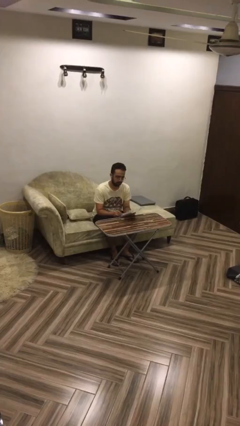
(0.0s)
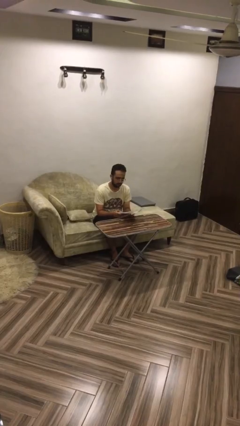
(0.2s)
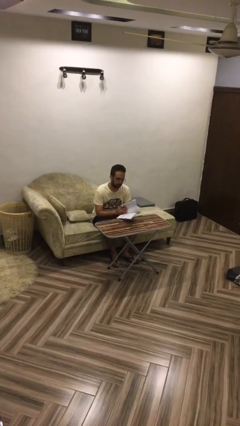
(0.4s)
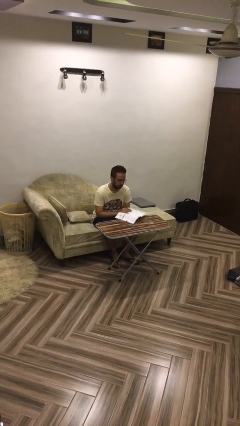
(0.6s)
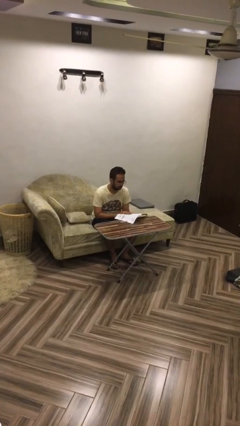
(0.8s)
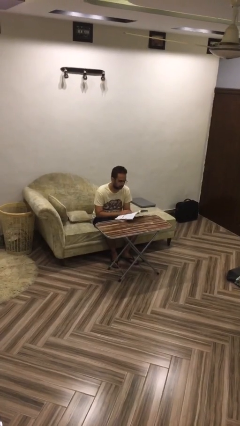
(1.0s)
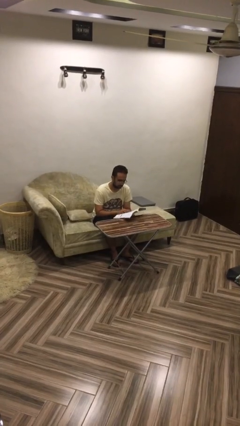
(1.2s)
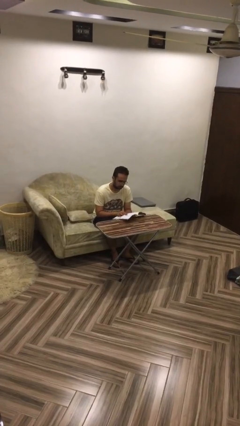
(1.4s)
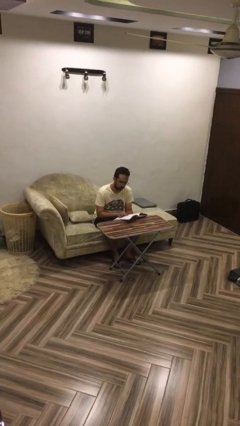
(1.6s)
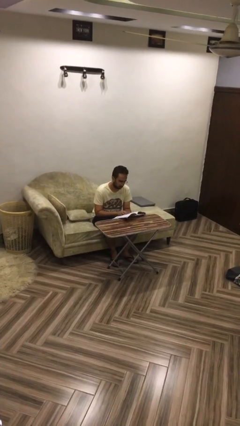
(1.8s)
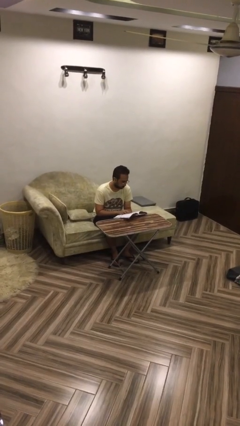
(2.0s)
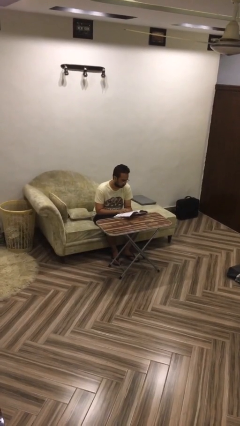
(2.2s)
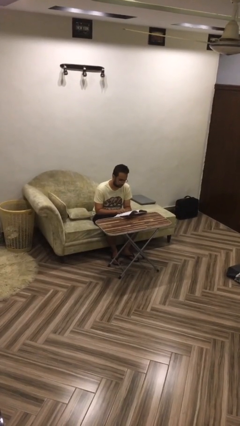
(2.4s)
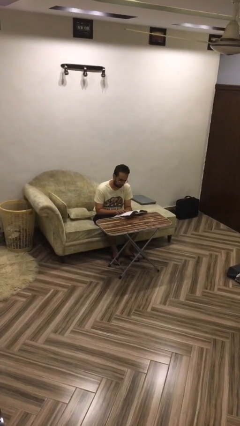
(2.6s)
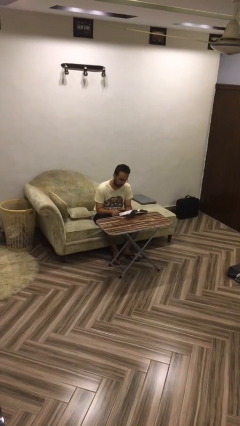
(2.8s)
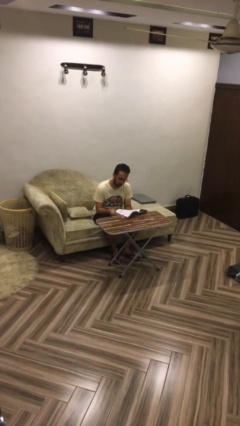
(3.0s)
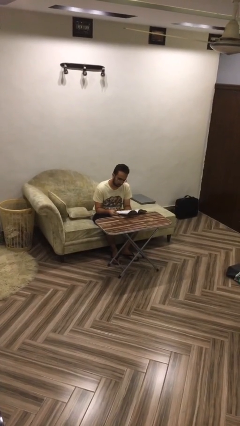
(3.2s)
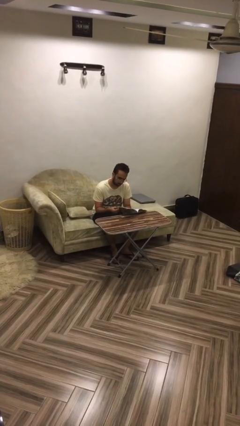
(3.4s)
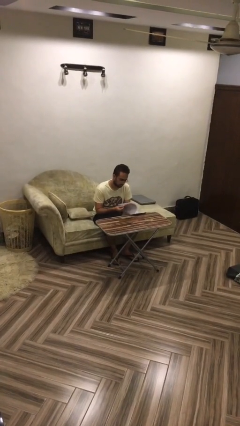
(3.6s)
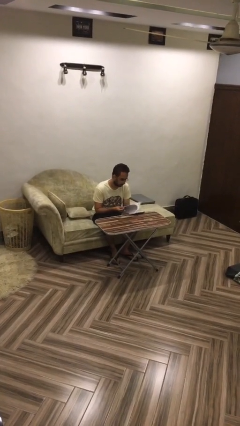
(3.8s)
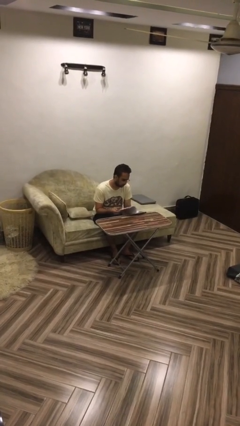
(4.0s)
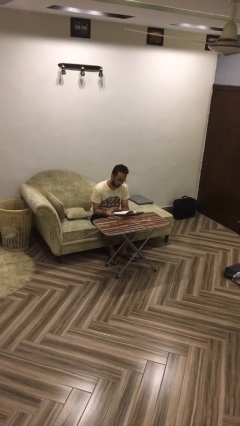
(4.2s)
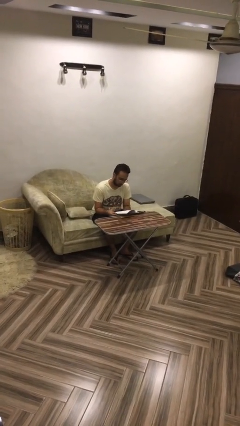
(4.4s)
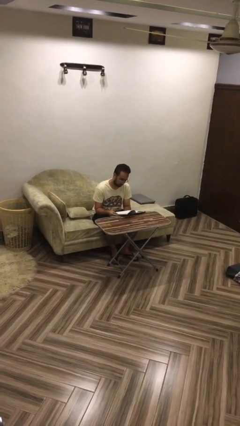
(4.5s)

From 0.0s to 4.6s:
person reads document

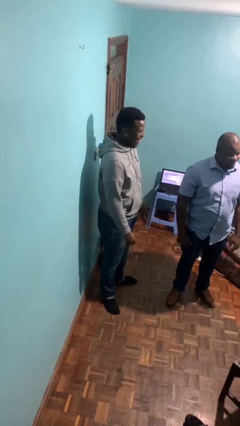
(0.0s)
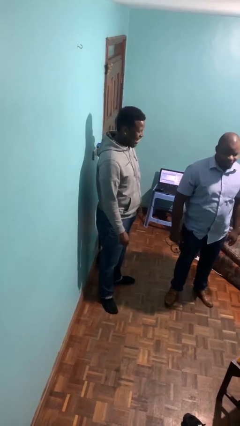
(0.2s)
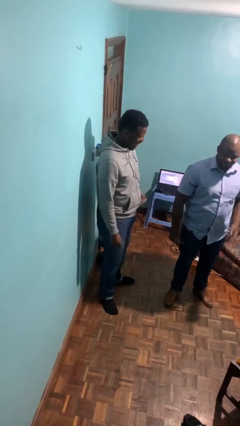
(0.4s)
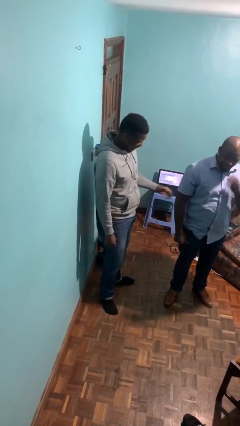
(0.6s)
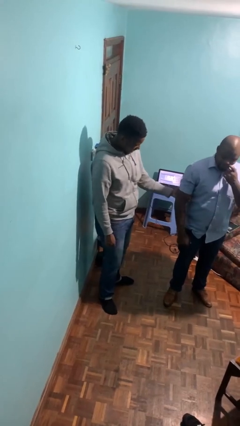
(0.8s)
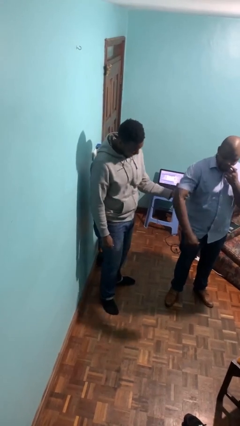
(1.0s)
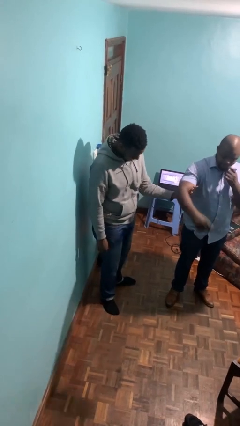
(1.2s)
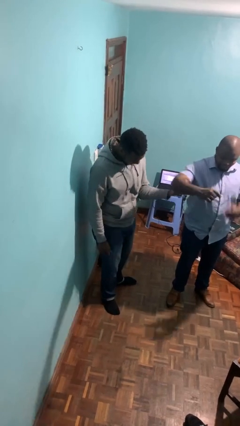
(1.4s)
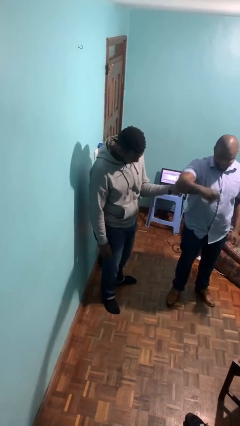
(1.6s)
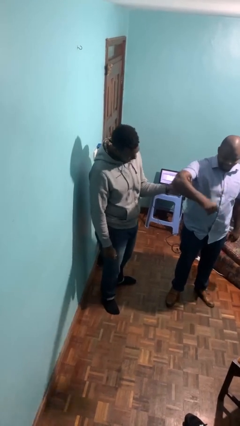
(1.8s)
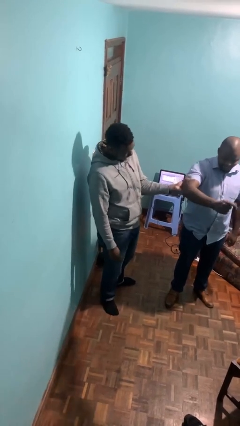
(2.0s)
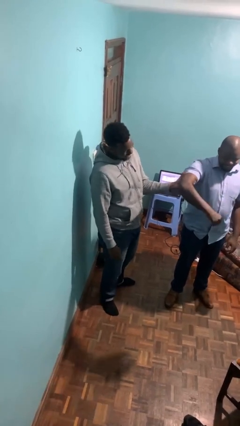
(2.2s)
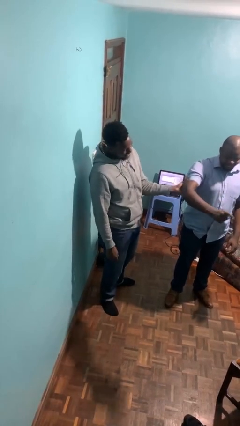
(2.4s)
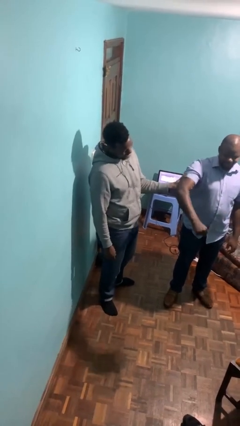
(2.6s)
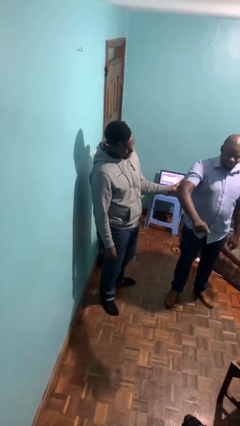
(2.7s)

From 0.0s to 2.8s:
person grabs person by forearm

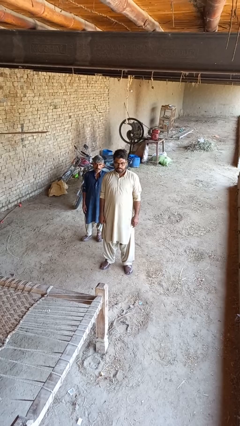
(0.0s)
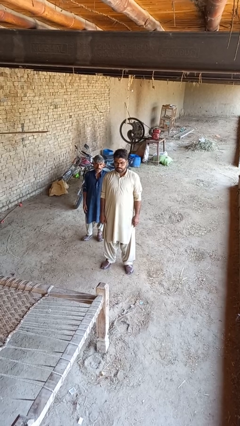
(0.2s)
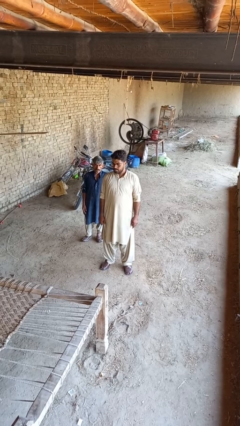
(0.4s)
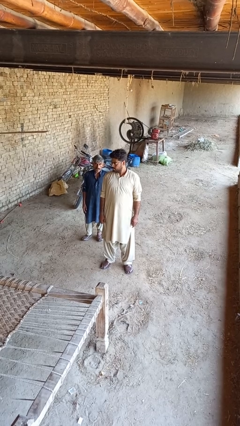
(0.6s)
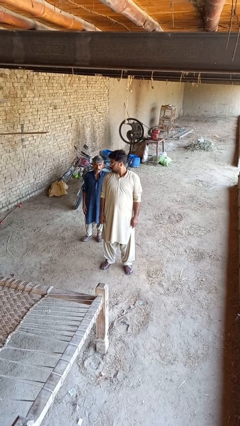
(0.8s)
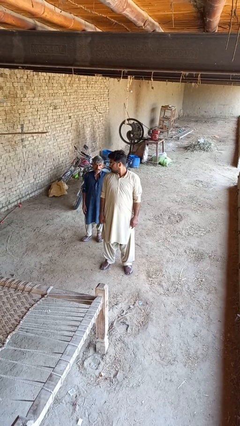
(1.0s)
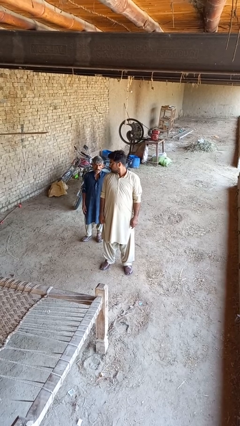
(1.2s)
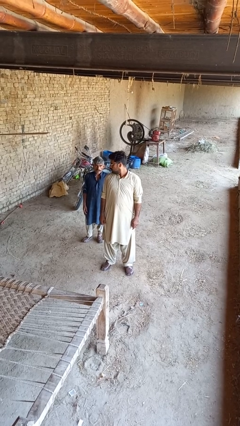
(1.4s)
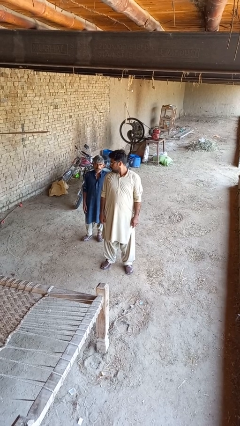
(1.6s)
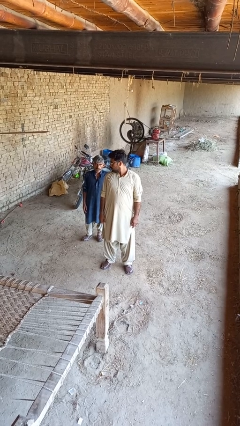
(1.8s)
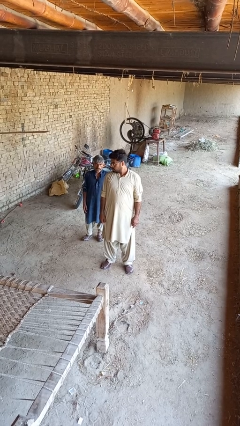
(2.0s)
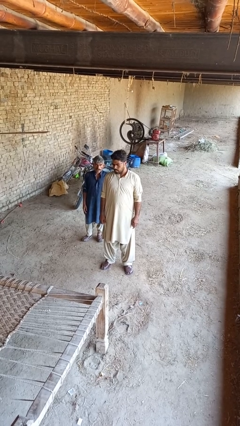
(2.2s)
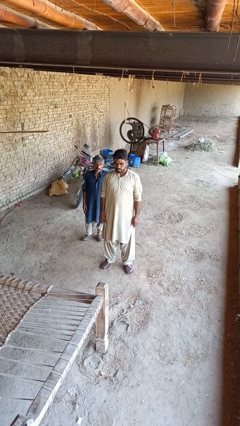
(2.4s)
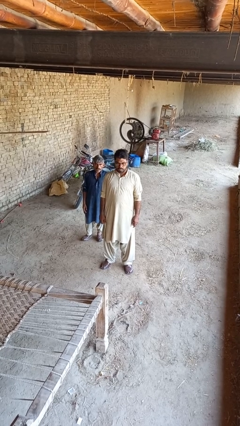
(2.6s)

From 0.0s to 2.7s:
person looks over shoulder

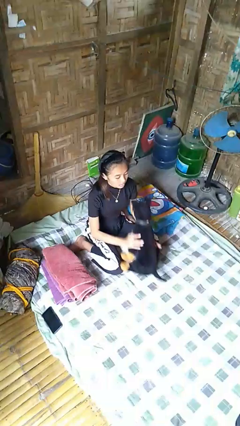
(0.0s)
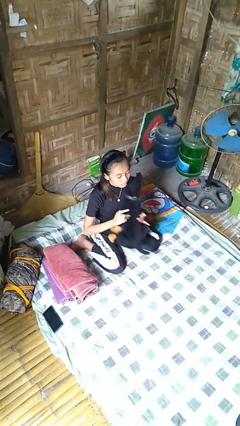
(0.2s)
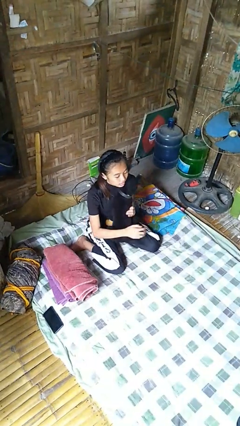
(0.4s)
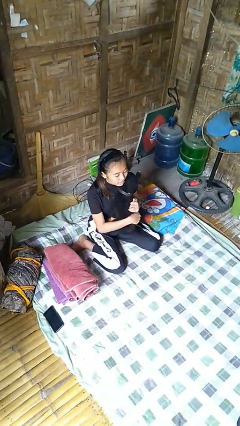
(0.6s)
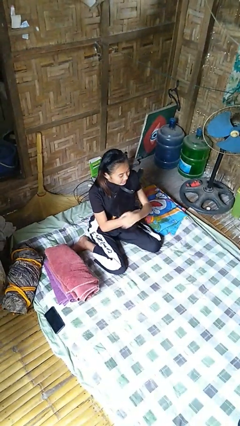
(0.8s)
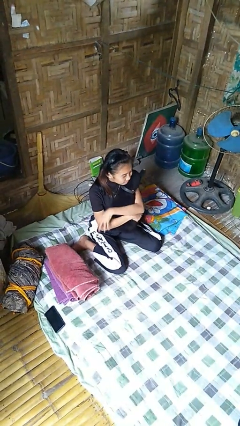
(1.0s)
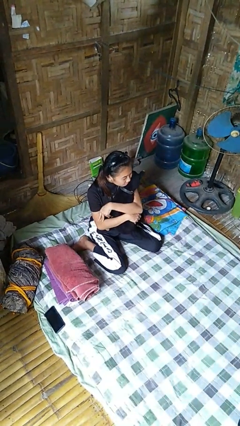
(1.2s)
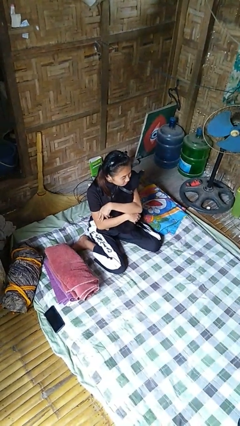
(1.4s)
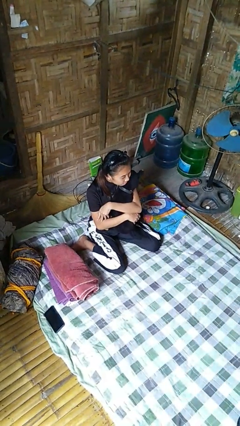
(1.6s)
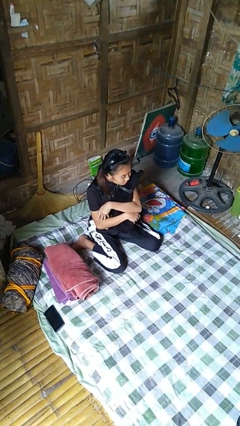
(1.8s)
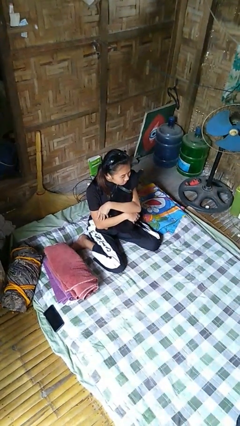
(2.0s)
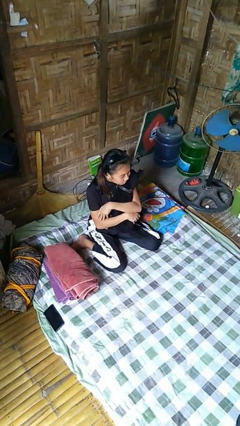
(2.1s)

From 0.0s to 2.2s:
person hugs stuffed animal

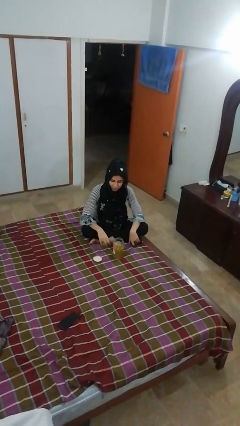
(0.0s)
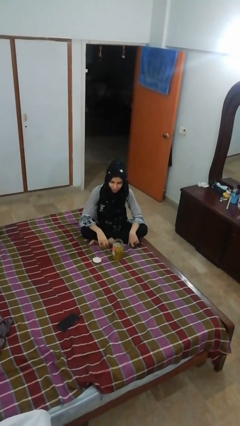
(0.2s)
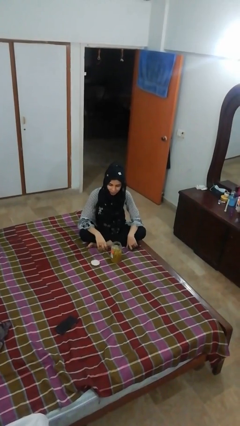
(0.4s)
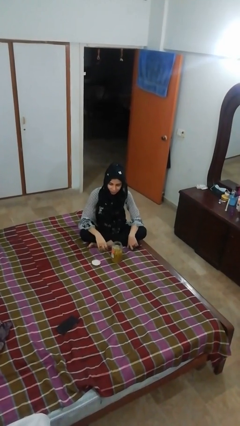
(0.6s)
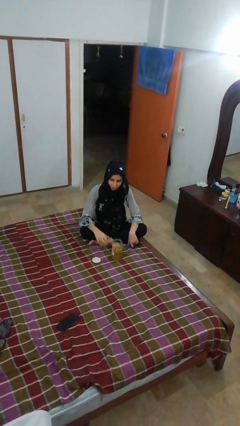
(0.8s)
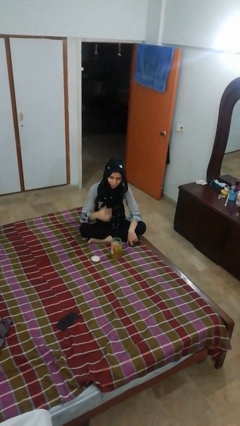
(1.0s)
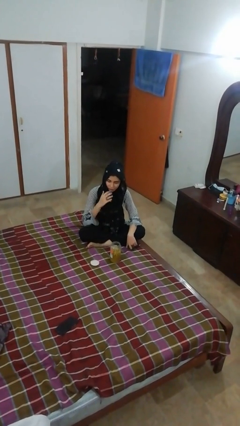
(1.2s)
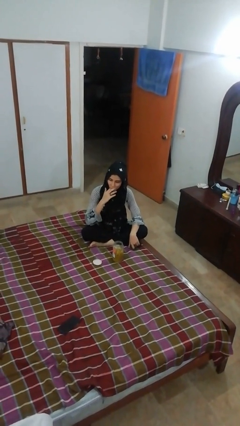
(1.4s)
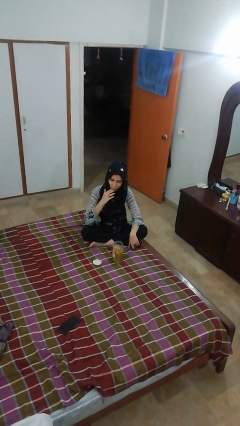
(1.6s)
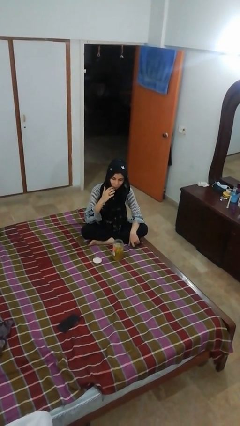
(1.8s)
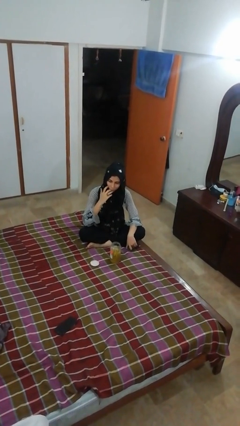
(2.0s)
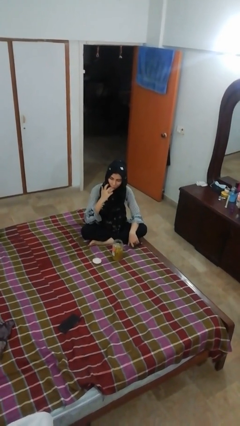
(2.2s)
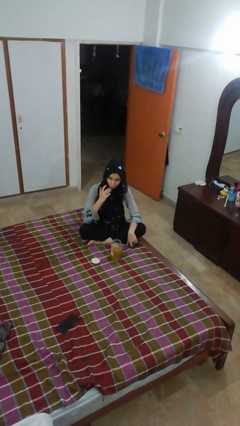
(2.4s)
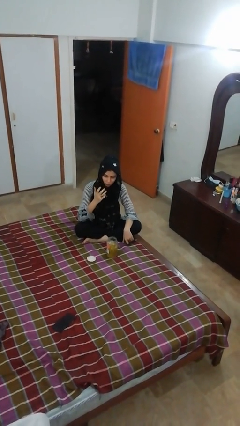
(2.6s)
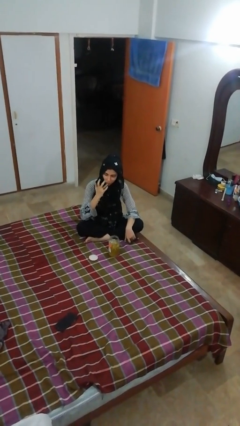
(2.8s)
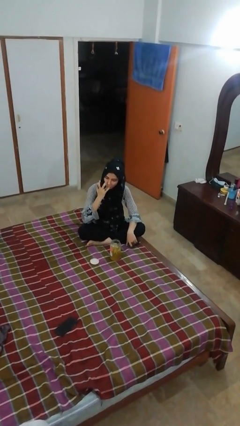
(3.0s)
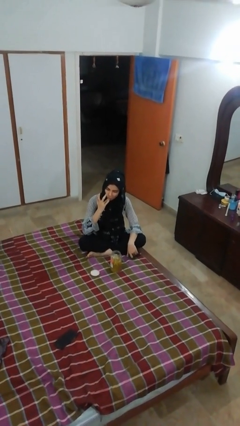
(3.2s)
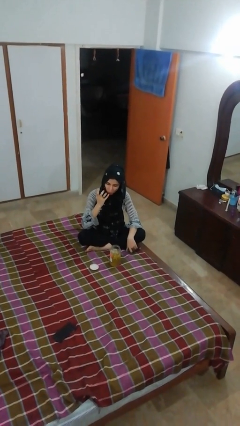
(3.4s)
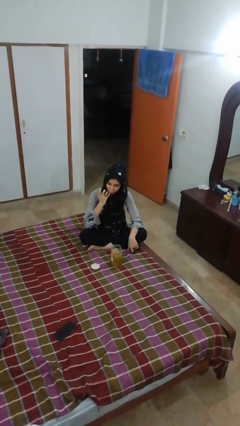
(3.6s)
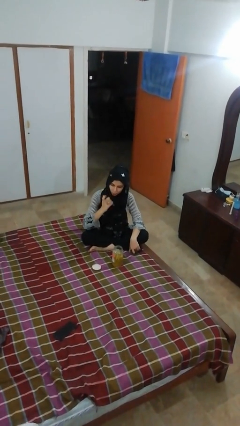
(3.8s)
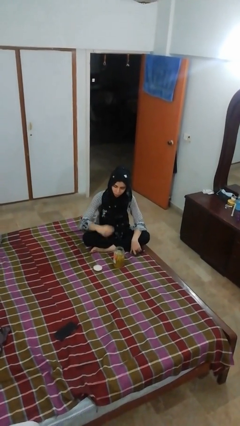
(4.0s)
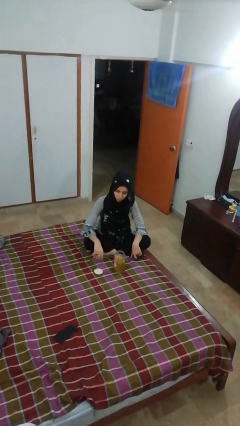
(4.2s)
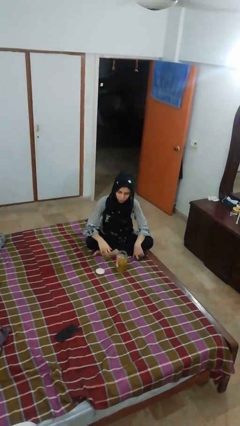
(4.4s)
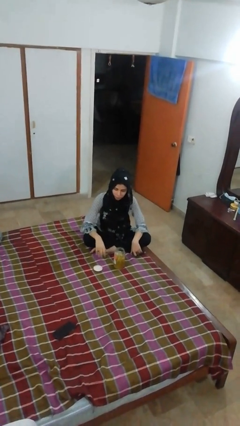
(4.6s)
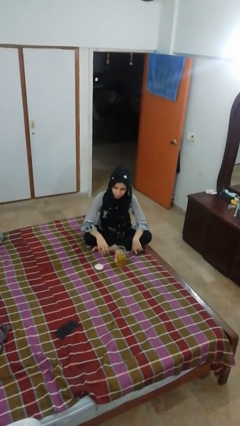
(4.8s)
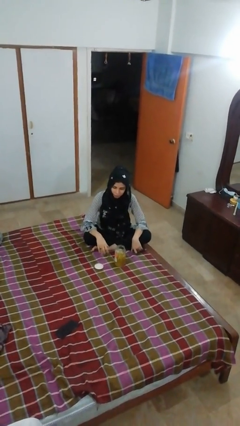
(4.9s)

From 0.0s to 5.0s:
person licks fingers

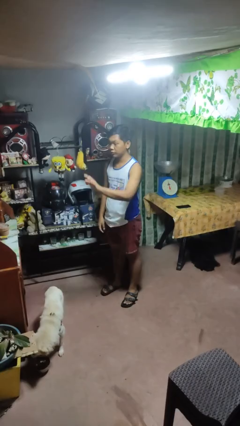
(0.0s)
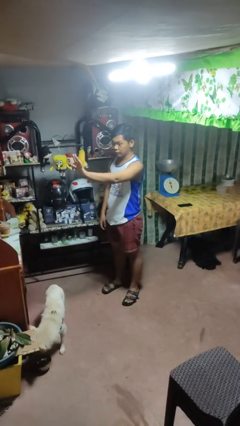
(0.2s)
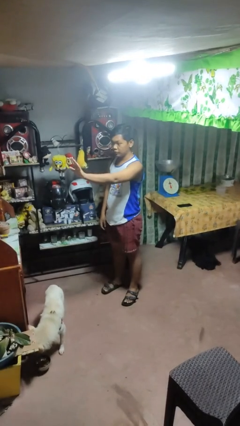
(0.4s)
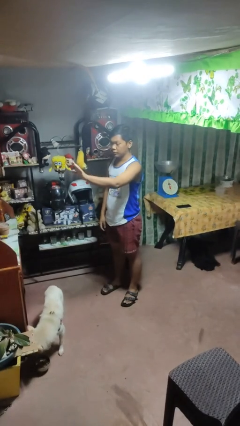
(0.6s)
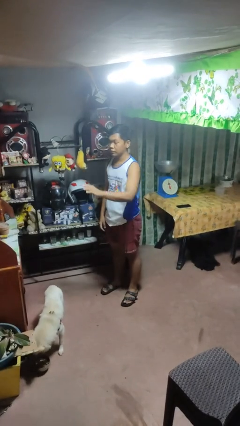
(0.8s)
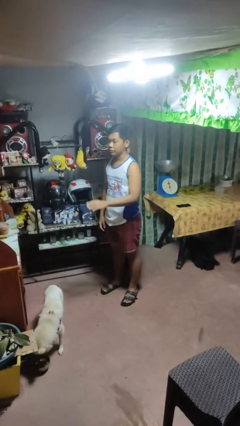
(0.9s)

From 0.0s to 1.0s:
person gestures stop
